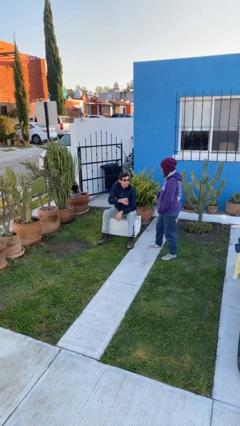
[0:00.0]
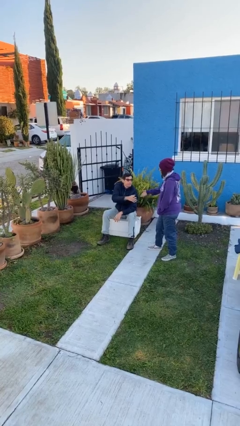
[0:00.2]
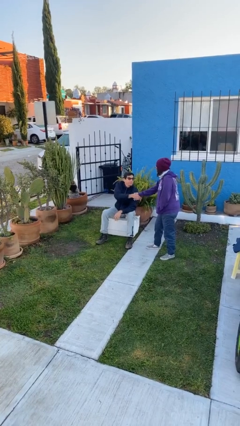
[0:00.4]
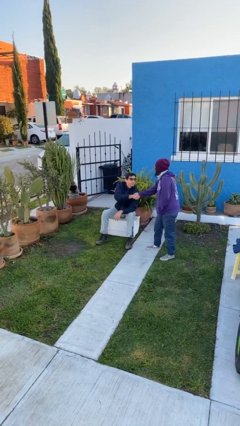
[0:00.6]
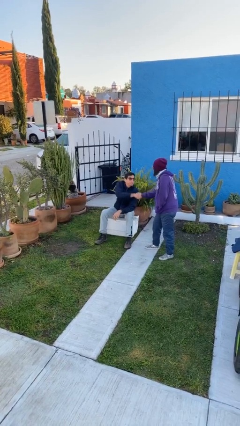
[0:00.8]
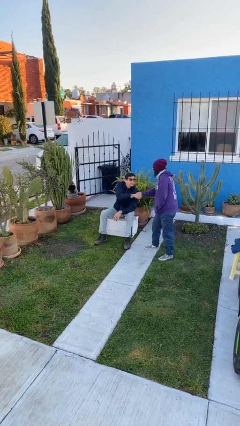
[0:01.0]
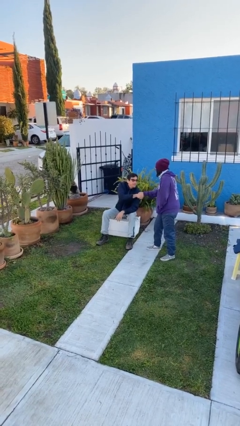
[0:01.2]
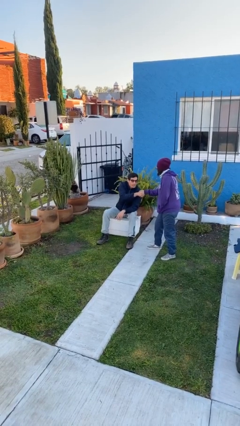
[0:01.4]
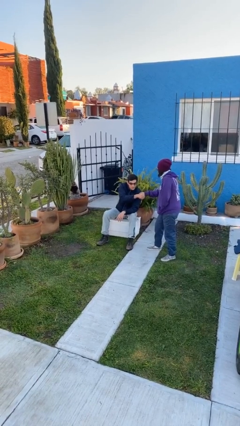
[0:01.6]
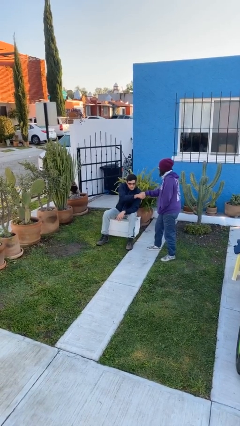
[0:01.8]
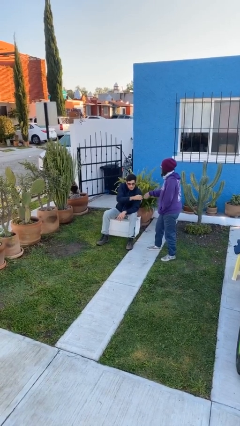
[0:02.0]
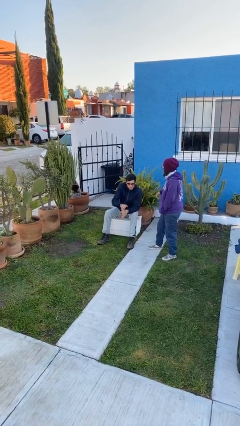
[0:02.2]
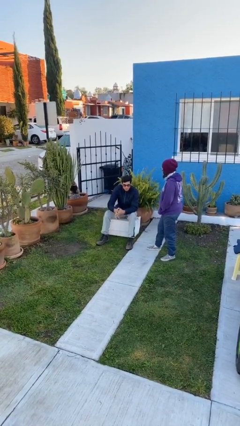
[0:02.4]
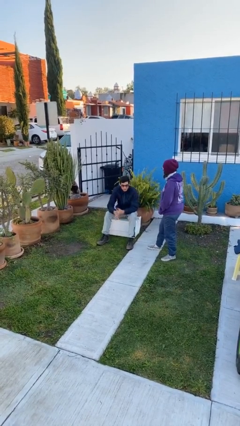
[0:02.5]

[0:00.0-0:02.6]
person shakes hand

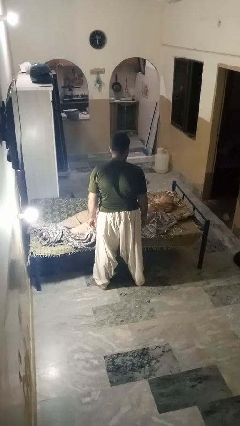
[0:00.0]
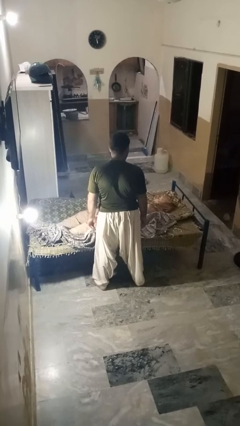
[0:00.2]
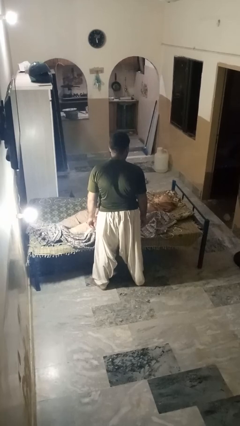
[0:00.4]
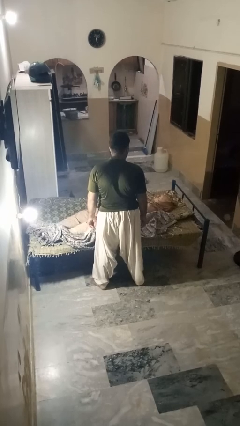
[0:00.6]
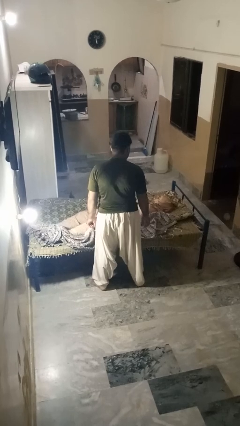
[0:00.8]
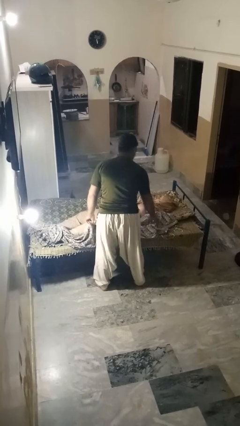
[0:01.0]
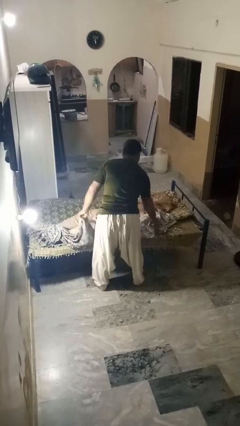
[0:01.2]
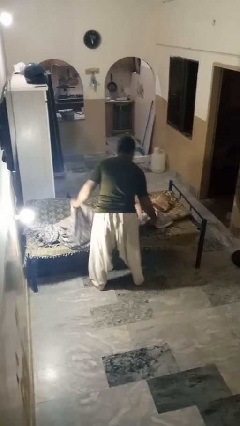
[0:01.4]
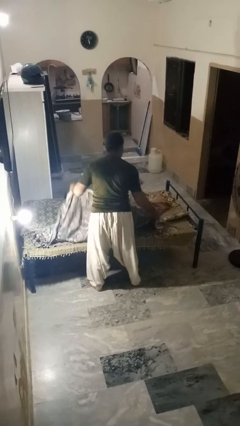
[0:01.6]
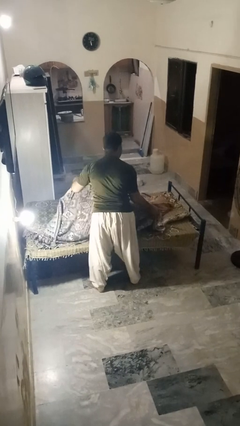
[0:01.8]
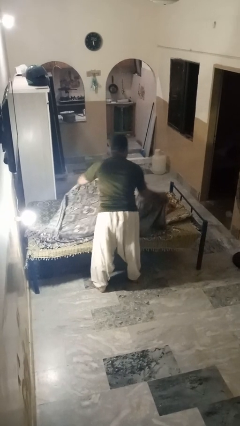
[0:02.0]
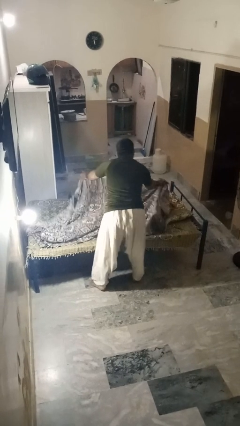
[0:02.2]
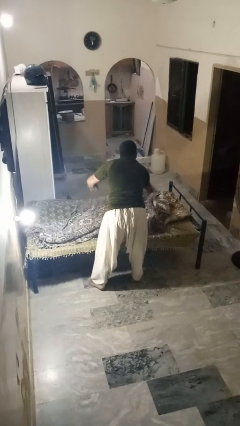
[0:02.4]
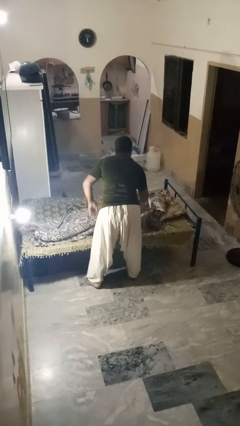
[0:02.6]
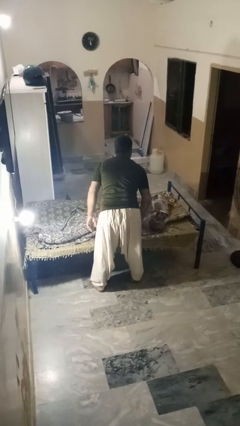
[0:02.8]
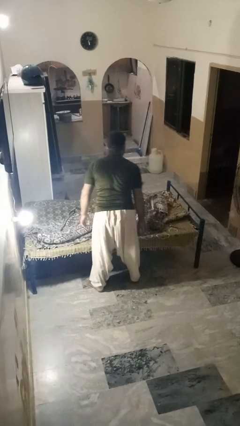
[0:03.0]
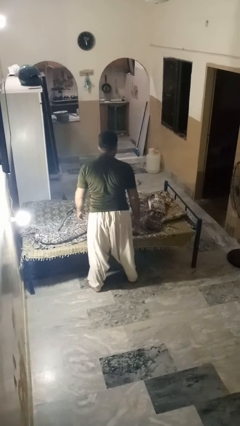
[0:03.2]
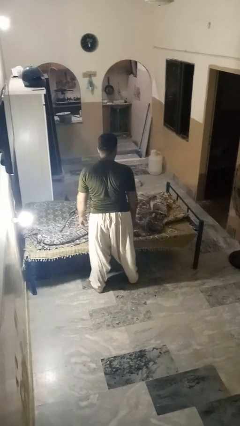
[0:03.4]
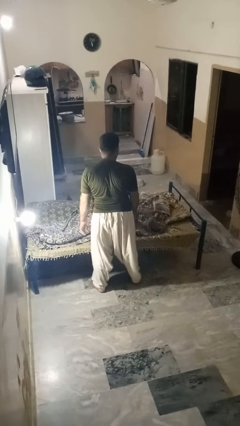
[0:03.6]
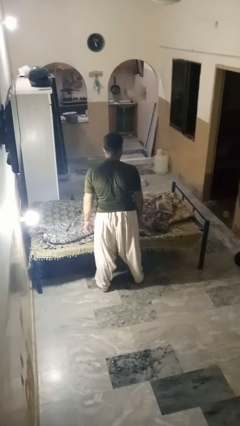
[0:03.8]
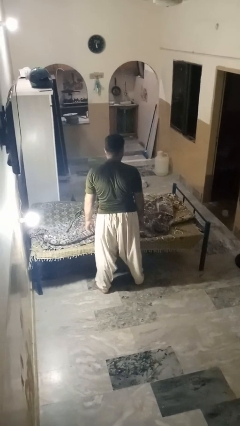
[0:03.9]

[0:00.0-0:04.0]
person covers friend with blanket

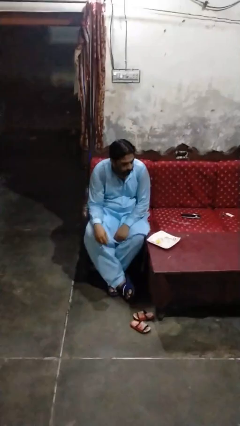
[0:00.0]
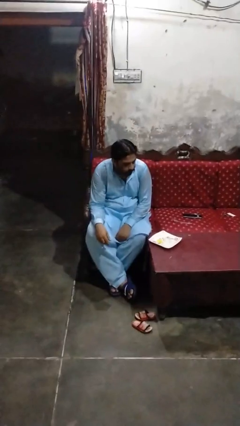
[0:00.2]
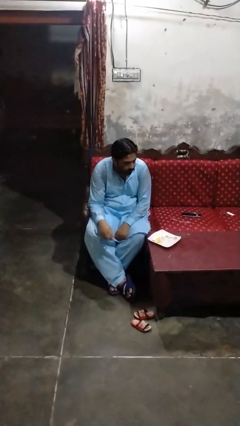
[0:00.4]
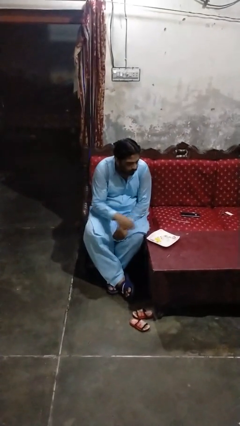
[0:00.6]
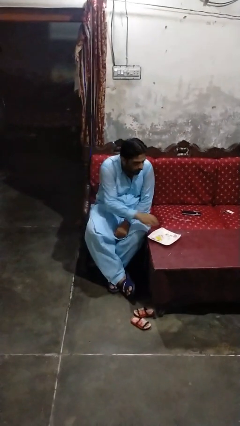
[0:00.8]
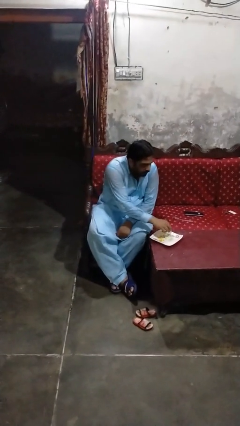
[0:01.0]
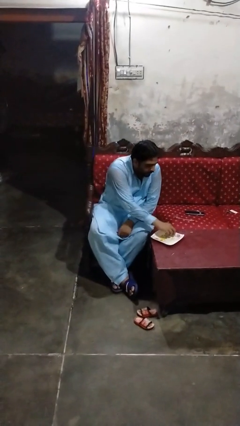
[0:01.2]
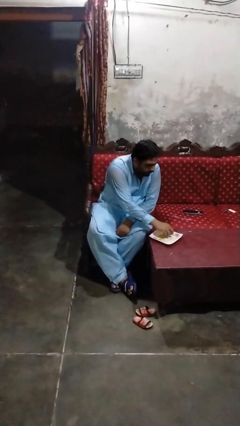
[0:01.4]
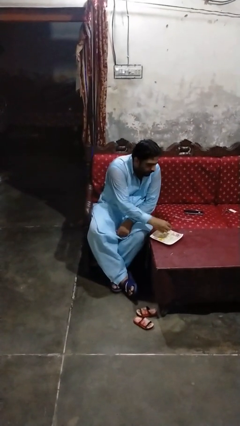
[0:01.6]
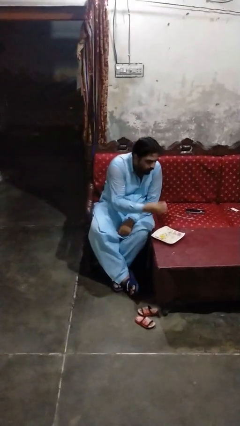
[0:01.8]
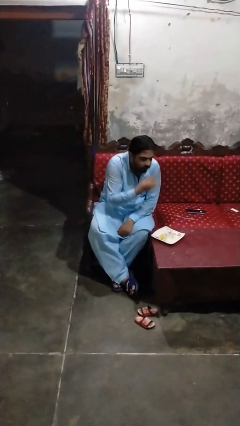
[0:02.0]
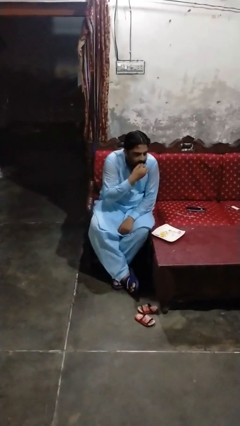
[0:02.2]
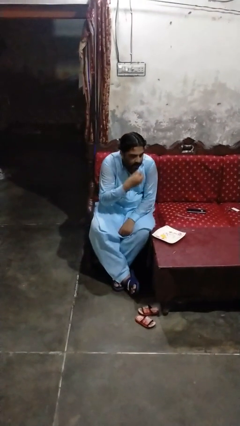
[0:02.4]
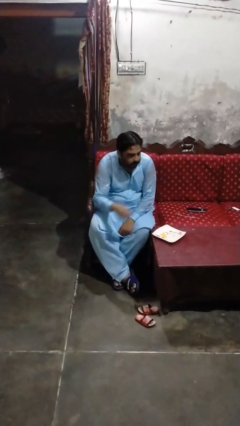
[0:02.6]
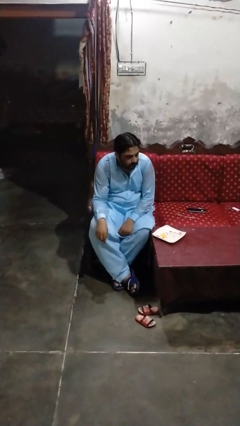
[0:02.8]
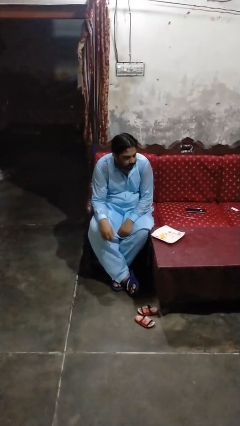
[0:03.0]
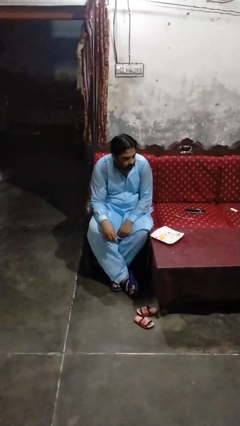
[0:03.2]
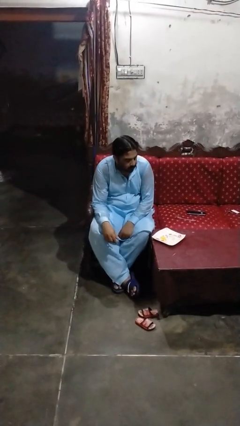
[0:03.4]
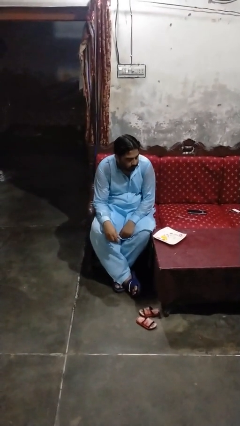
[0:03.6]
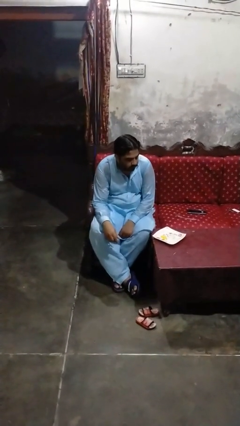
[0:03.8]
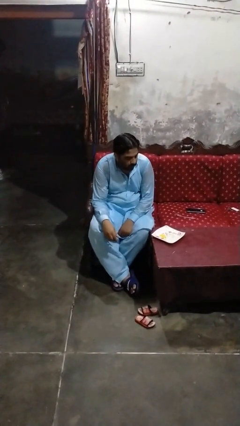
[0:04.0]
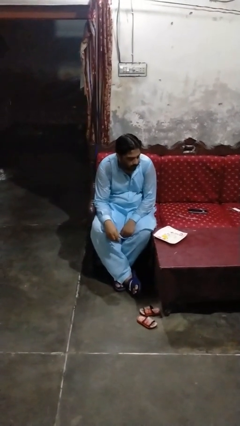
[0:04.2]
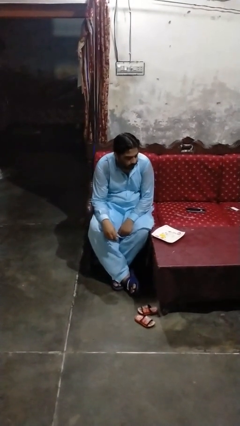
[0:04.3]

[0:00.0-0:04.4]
person eats with hands

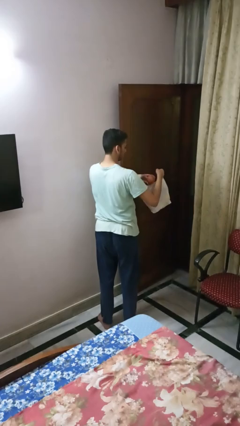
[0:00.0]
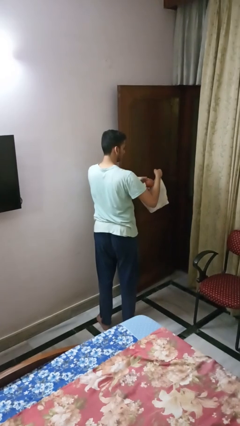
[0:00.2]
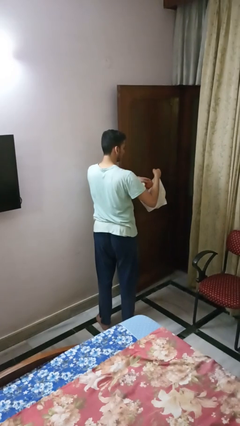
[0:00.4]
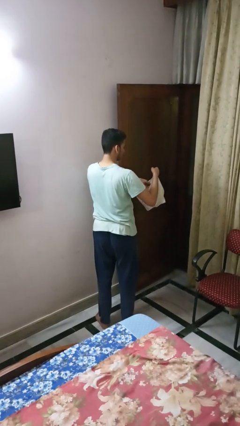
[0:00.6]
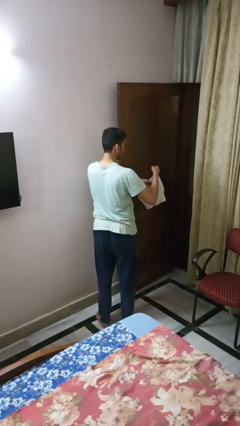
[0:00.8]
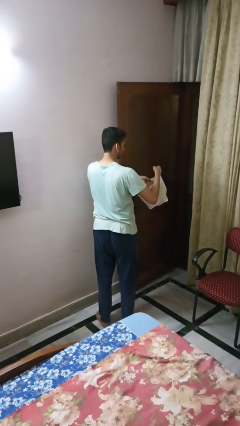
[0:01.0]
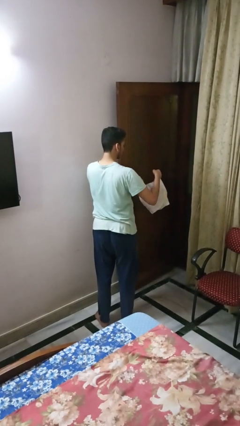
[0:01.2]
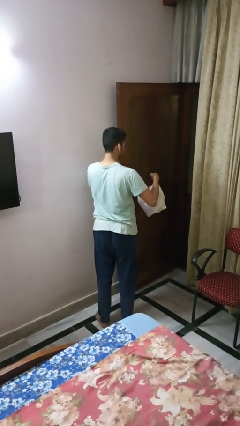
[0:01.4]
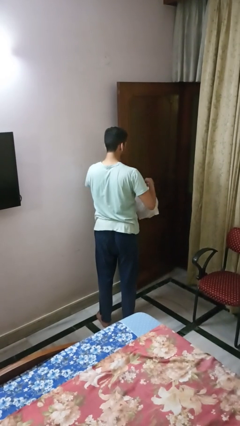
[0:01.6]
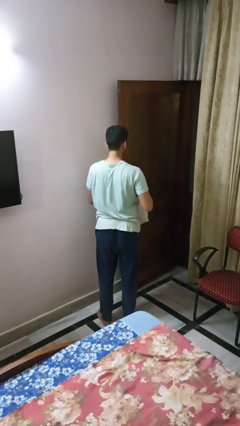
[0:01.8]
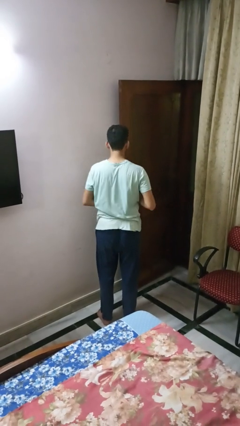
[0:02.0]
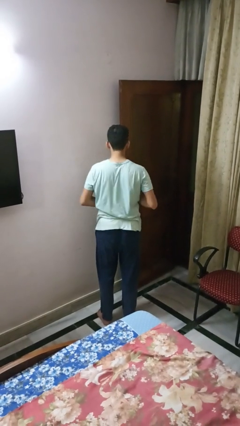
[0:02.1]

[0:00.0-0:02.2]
person puts object into bag

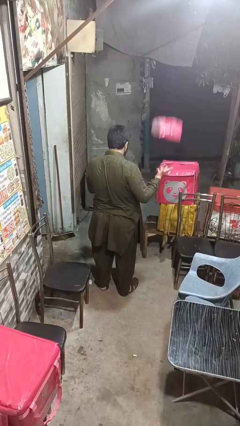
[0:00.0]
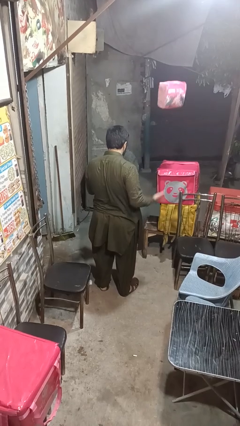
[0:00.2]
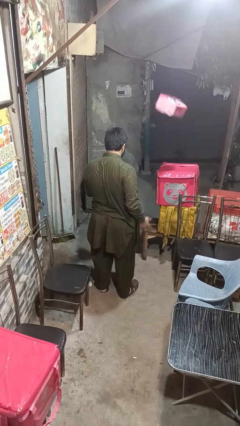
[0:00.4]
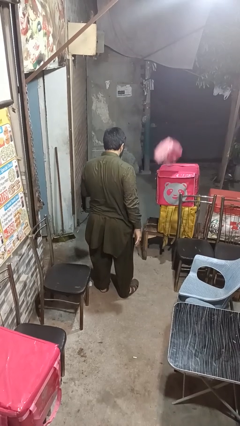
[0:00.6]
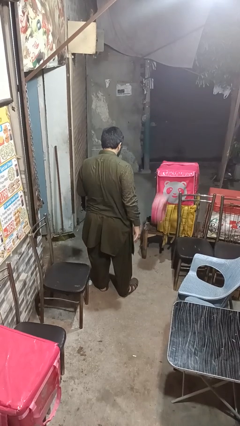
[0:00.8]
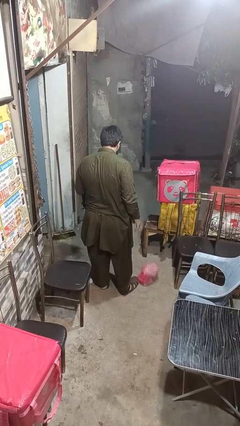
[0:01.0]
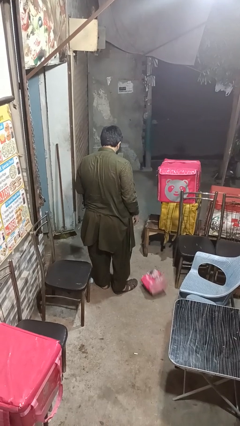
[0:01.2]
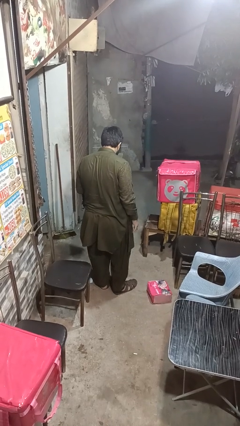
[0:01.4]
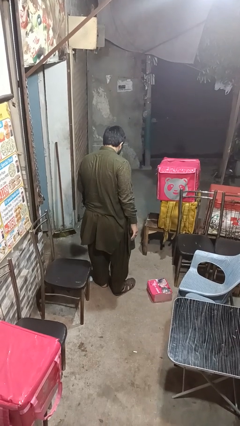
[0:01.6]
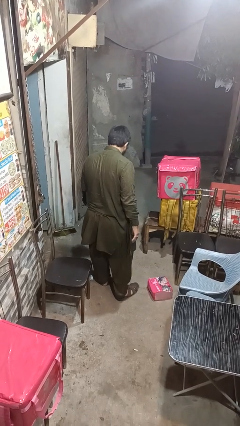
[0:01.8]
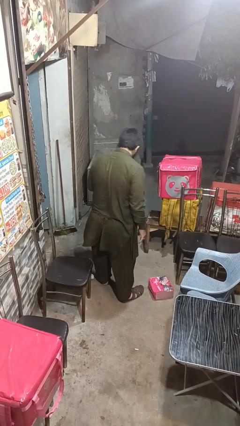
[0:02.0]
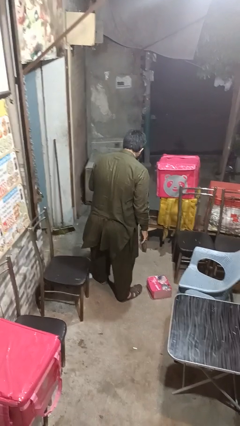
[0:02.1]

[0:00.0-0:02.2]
person throws object into air

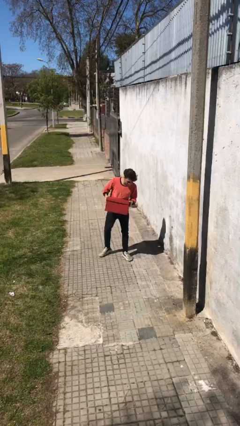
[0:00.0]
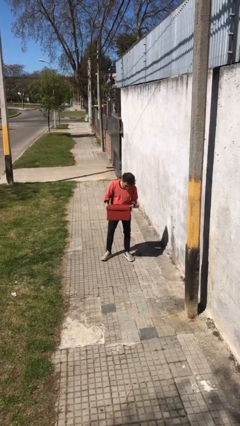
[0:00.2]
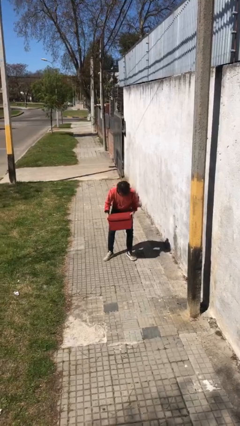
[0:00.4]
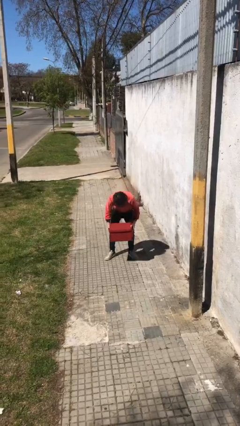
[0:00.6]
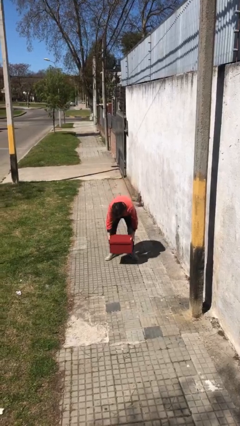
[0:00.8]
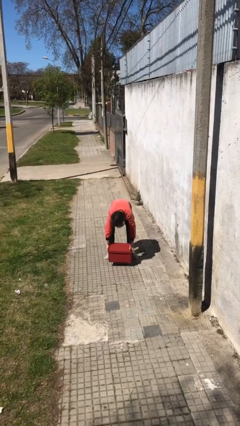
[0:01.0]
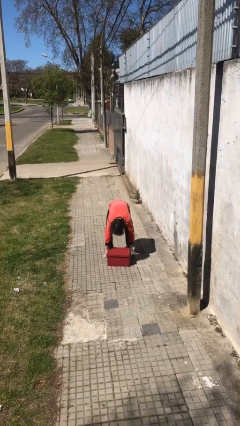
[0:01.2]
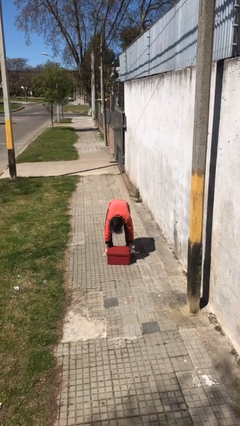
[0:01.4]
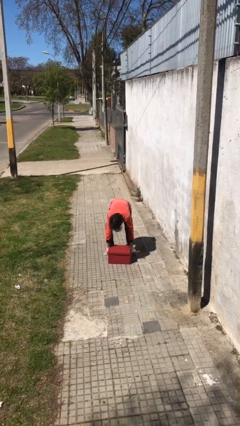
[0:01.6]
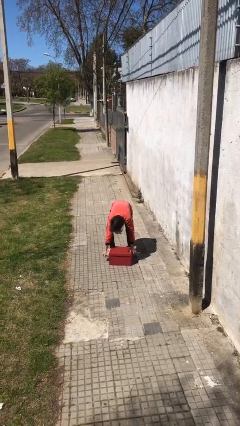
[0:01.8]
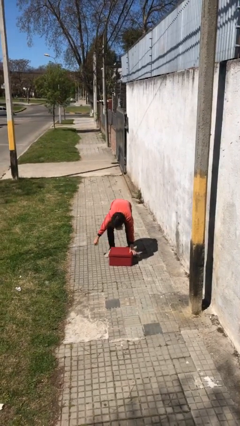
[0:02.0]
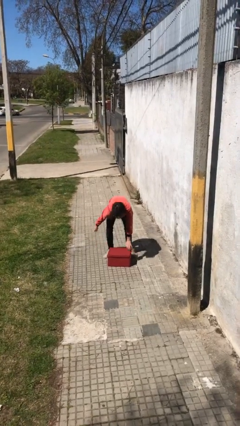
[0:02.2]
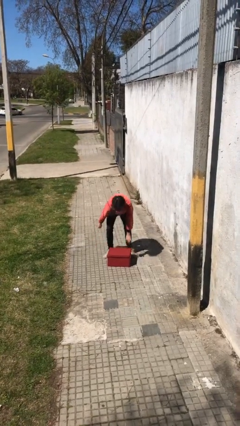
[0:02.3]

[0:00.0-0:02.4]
person puts down object on floor
